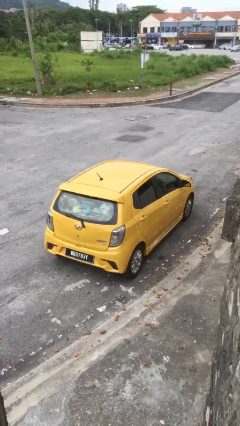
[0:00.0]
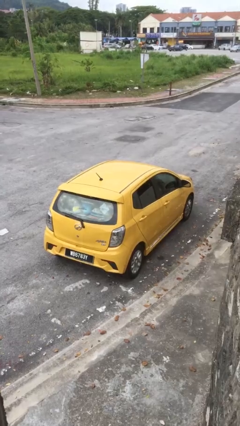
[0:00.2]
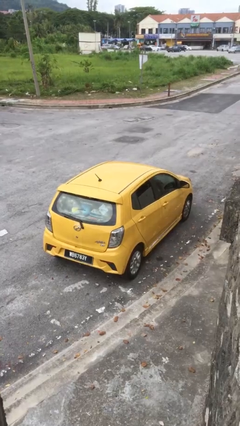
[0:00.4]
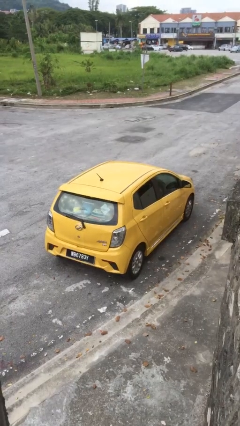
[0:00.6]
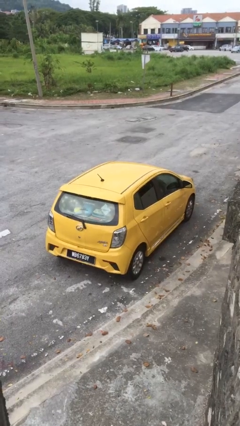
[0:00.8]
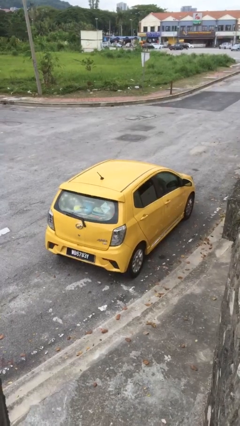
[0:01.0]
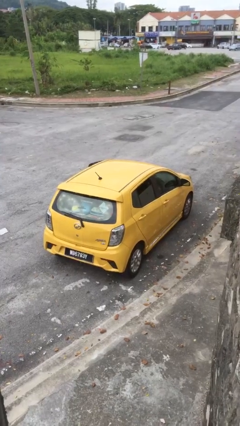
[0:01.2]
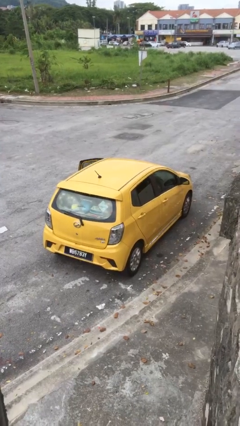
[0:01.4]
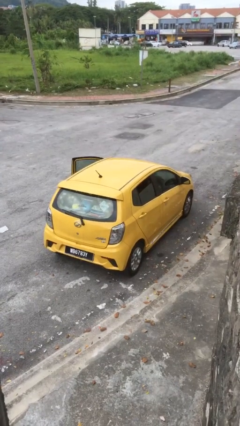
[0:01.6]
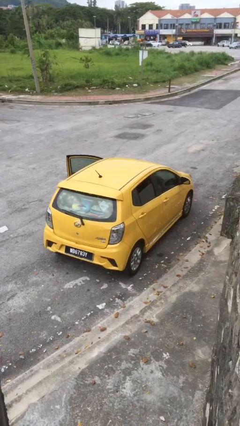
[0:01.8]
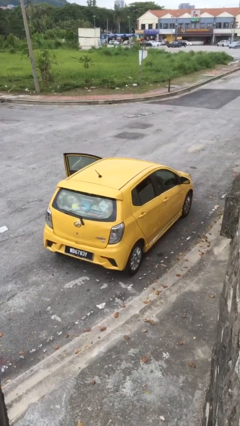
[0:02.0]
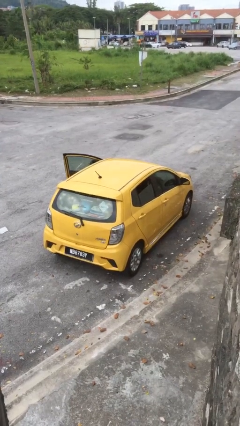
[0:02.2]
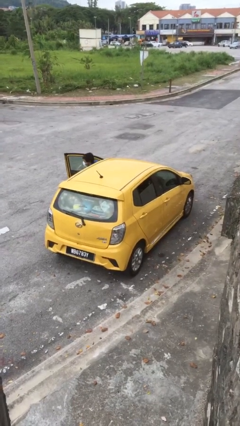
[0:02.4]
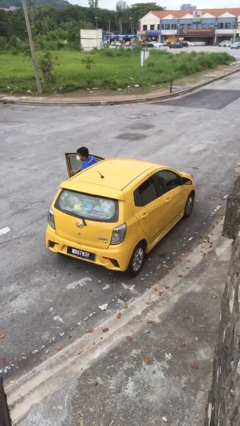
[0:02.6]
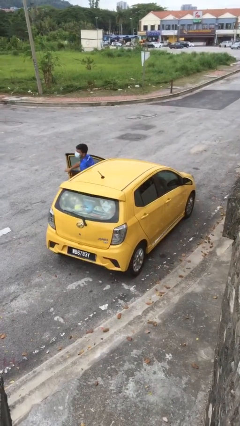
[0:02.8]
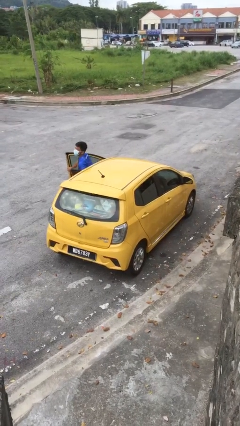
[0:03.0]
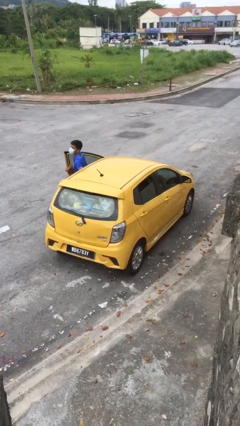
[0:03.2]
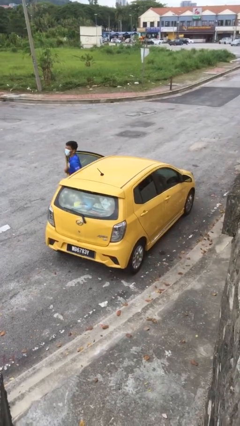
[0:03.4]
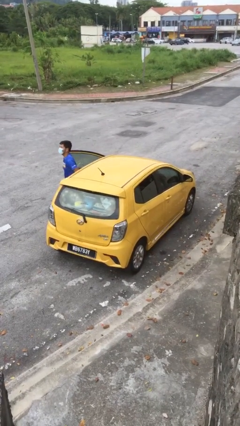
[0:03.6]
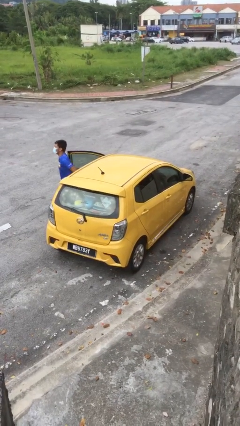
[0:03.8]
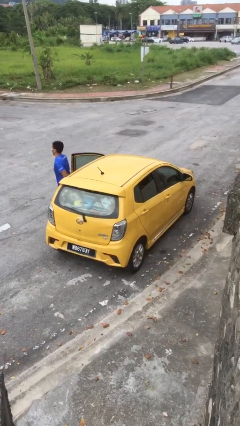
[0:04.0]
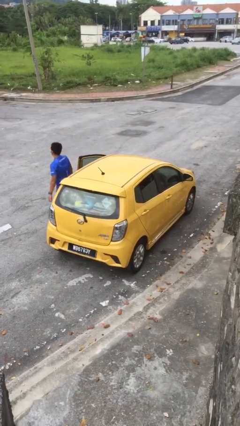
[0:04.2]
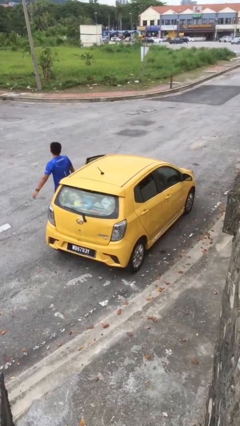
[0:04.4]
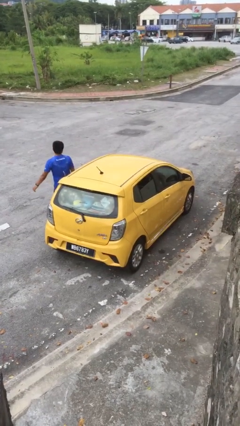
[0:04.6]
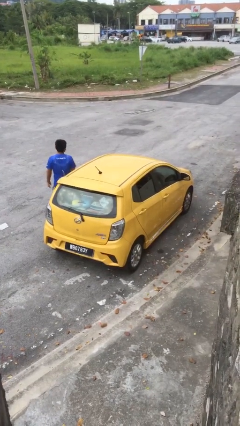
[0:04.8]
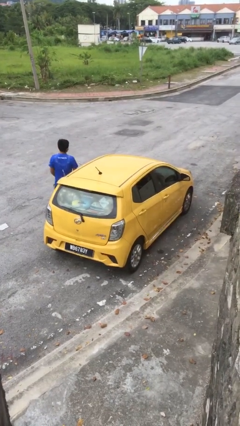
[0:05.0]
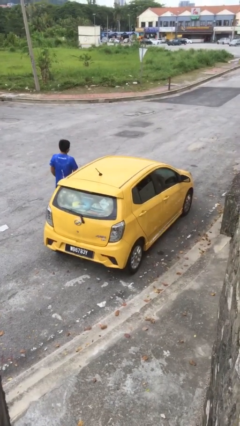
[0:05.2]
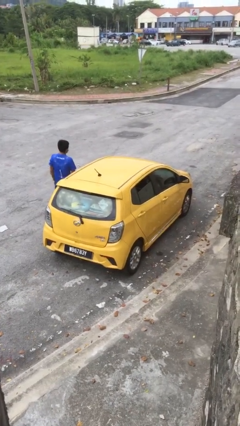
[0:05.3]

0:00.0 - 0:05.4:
car drops off person

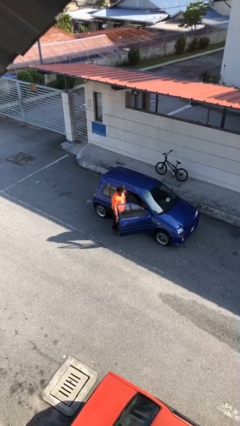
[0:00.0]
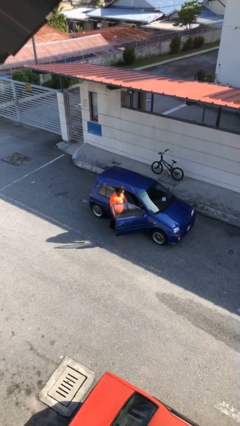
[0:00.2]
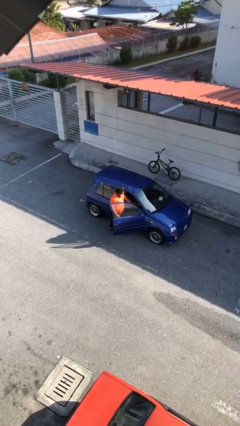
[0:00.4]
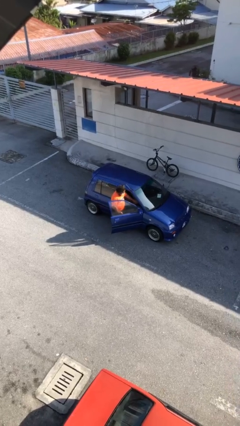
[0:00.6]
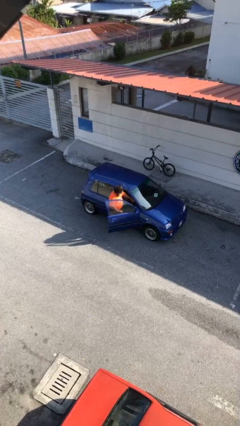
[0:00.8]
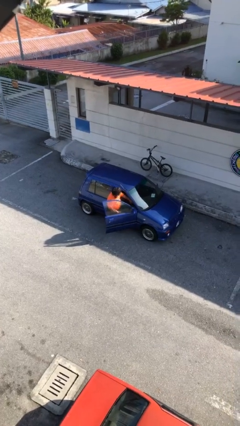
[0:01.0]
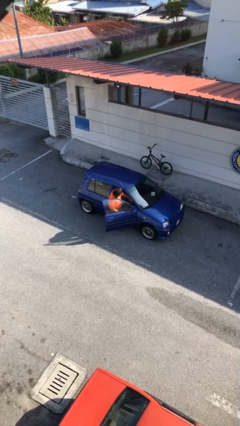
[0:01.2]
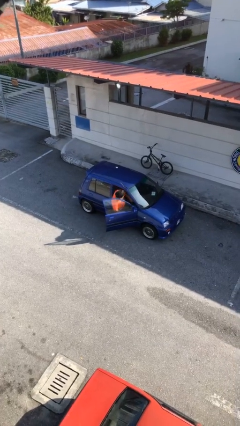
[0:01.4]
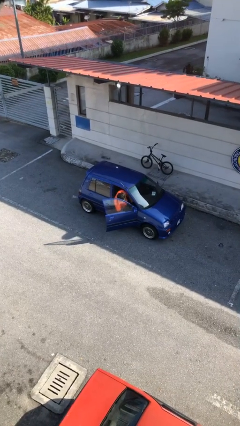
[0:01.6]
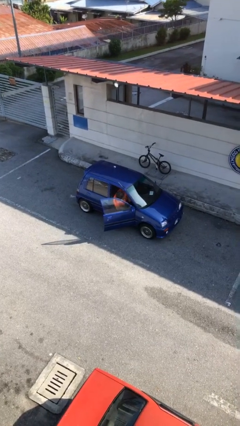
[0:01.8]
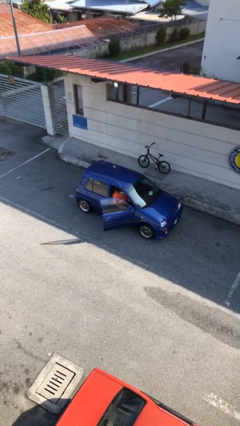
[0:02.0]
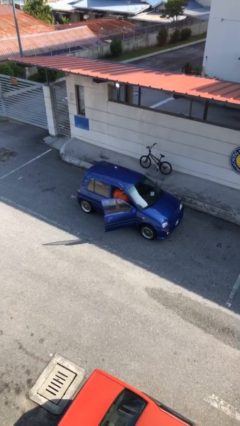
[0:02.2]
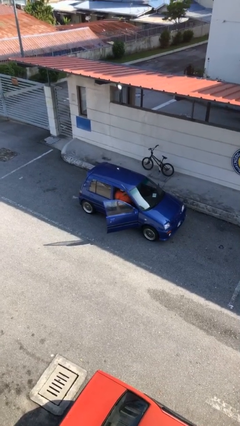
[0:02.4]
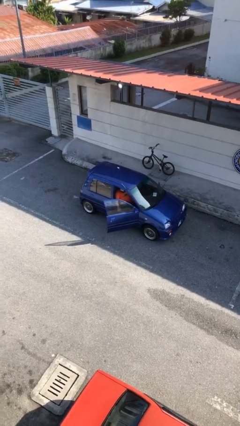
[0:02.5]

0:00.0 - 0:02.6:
person enters car

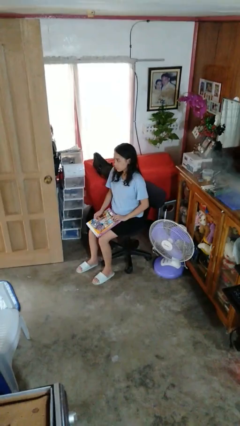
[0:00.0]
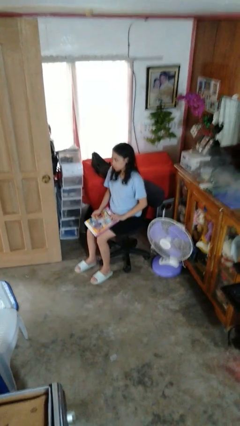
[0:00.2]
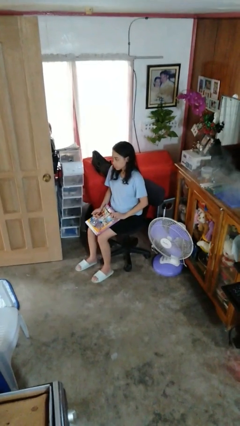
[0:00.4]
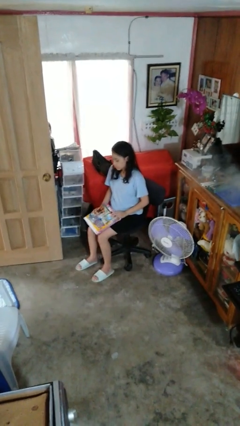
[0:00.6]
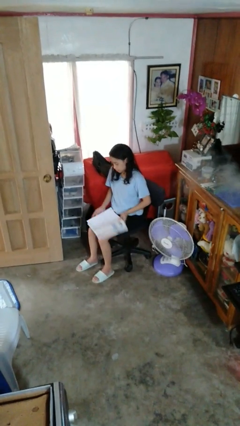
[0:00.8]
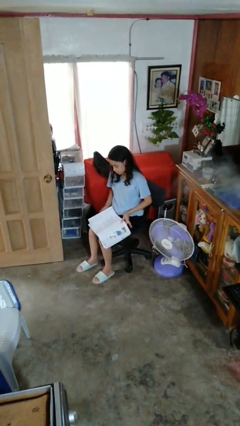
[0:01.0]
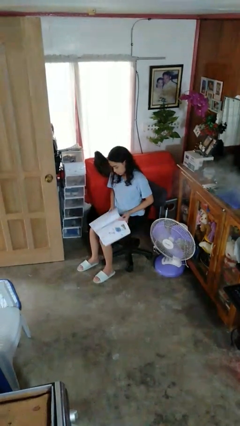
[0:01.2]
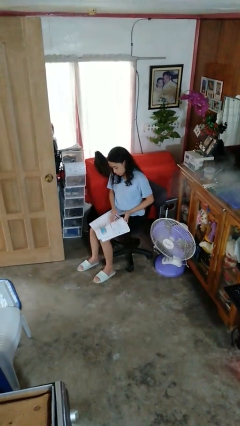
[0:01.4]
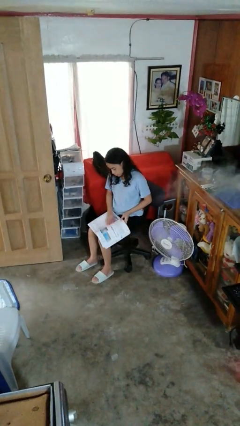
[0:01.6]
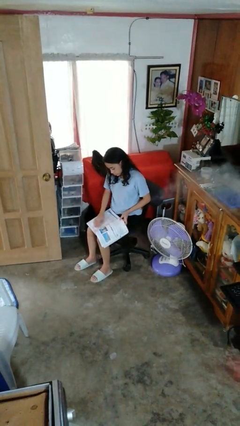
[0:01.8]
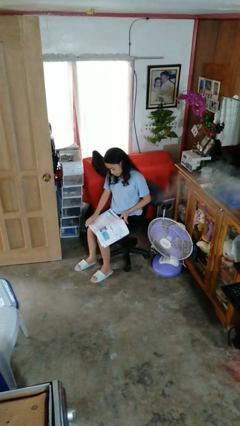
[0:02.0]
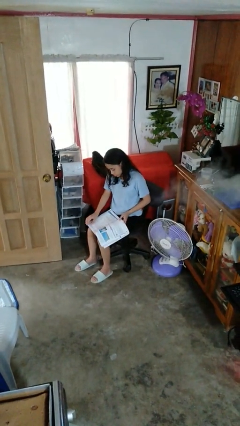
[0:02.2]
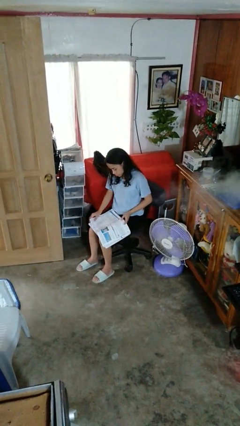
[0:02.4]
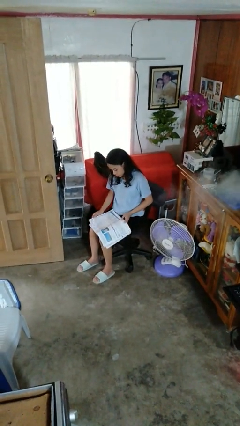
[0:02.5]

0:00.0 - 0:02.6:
person reads book

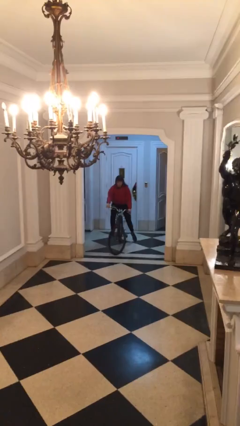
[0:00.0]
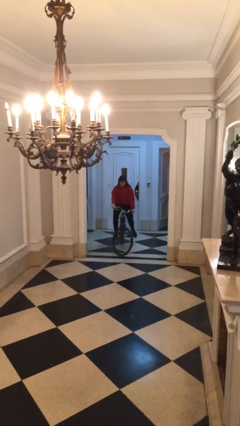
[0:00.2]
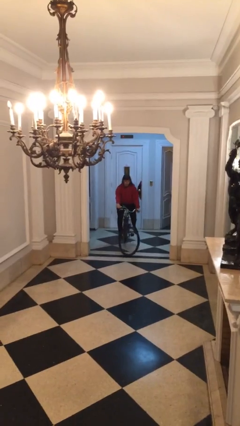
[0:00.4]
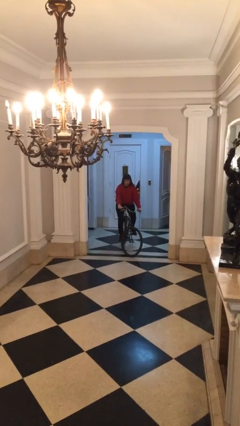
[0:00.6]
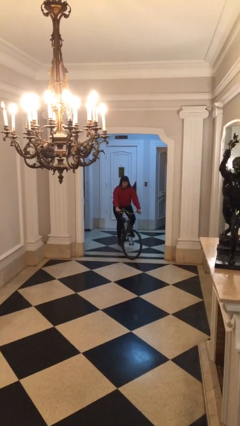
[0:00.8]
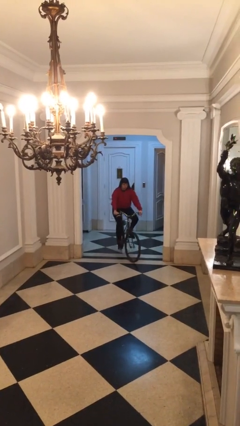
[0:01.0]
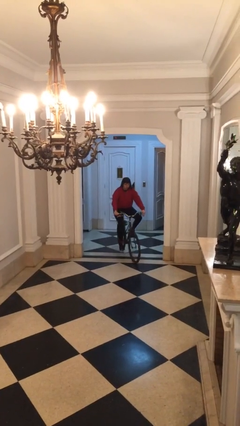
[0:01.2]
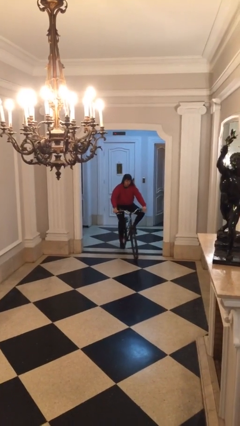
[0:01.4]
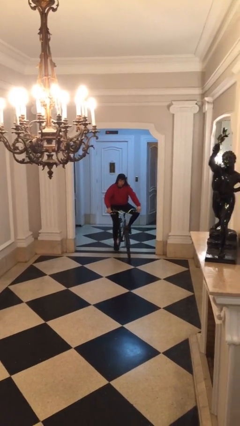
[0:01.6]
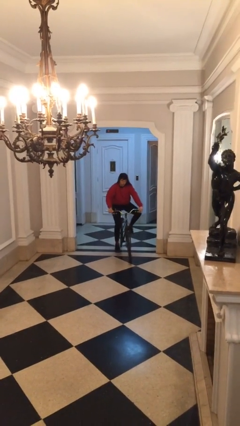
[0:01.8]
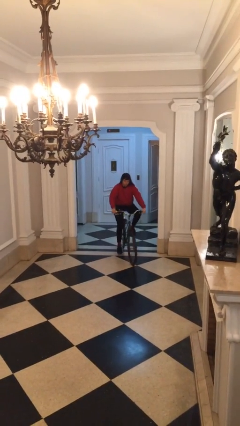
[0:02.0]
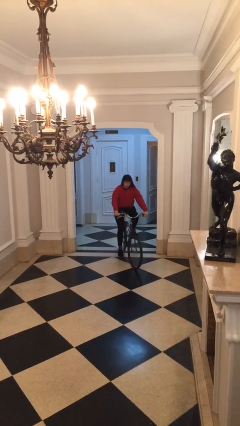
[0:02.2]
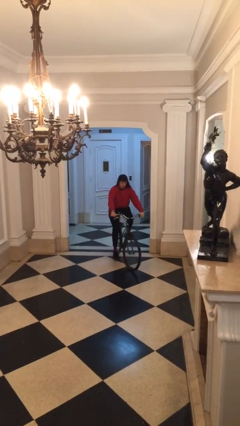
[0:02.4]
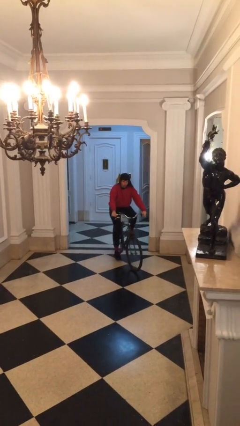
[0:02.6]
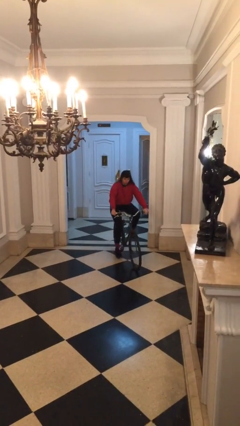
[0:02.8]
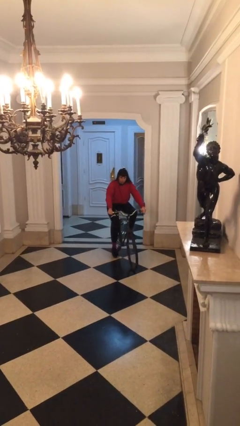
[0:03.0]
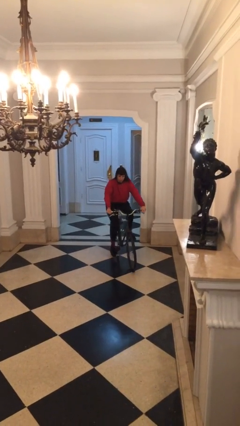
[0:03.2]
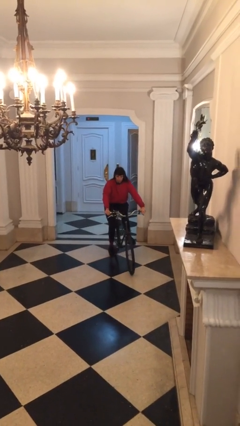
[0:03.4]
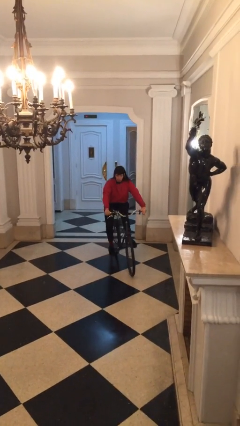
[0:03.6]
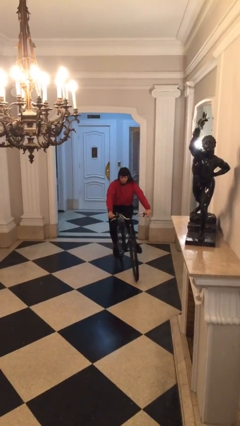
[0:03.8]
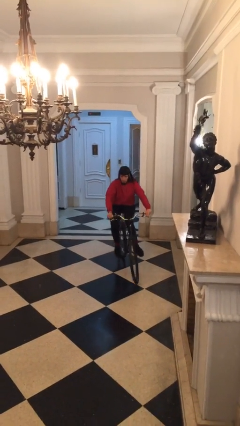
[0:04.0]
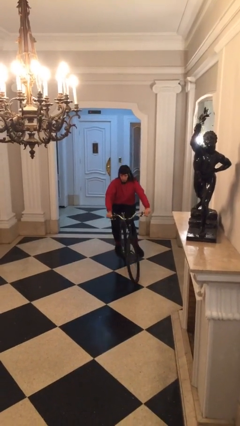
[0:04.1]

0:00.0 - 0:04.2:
person rides bicycle

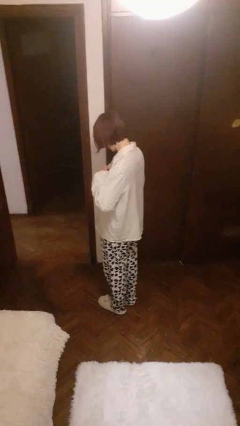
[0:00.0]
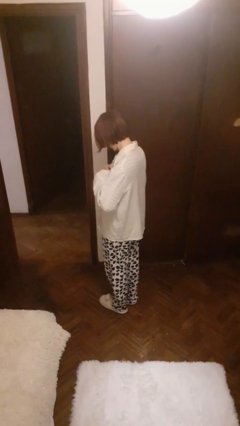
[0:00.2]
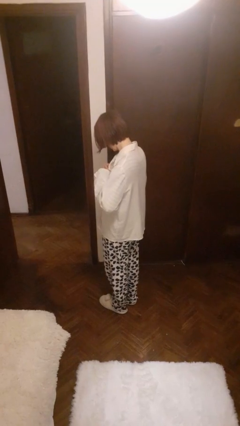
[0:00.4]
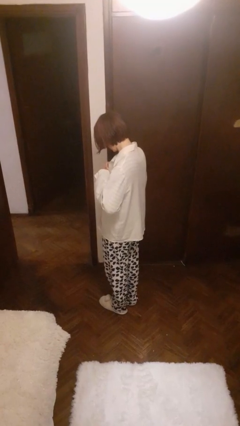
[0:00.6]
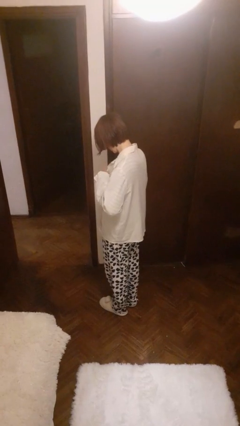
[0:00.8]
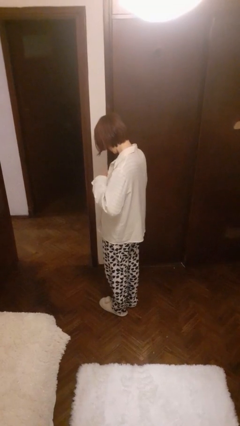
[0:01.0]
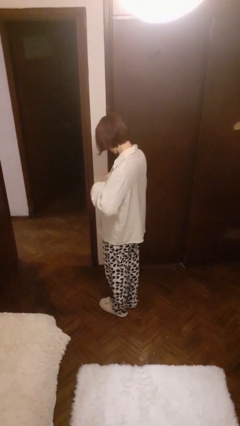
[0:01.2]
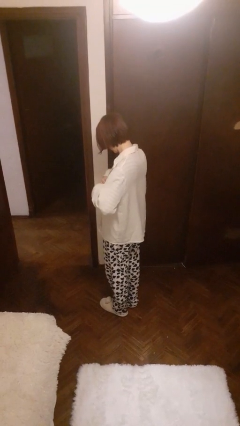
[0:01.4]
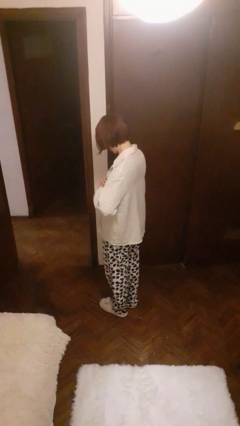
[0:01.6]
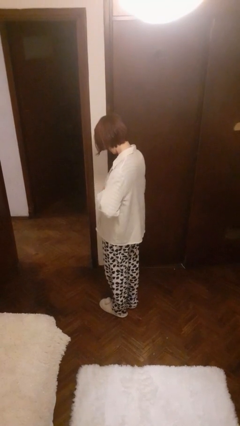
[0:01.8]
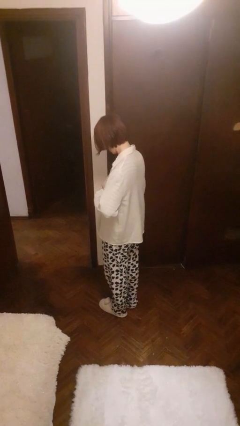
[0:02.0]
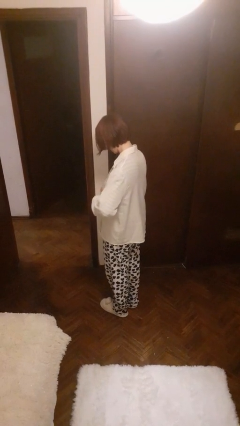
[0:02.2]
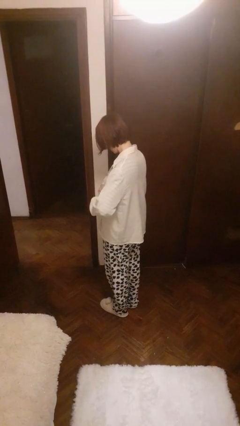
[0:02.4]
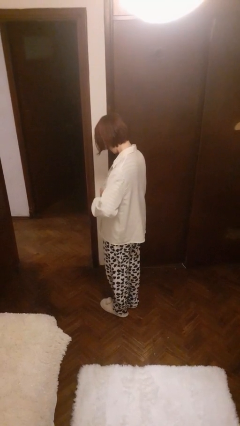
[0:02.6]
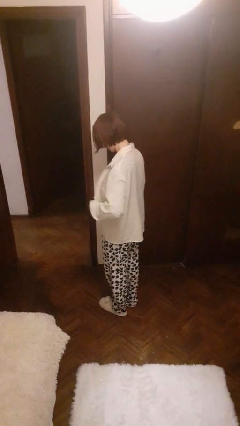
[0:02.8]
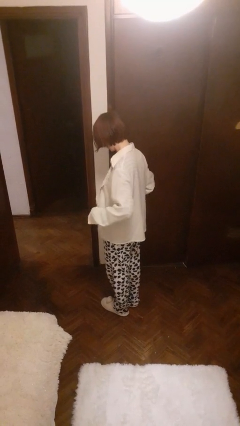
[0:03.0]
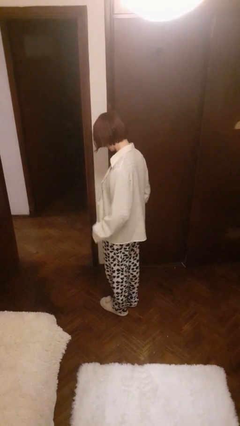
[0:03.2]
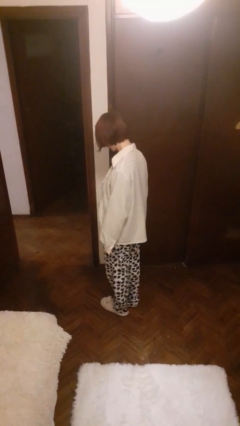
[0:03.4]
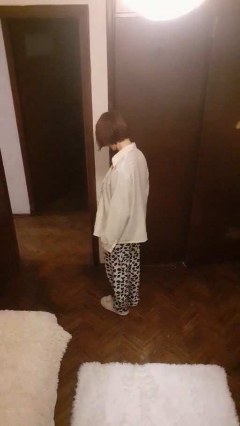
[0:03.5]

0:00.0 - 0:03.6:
person unbuttons shirt
